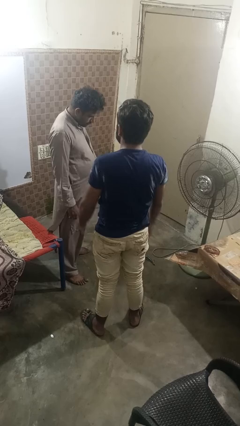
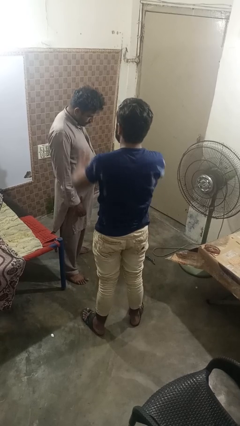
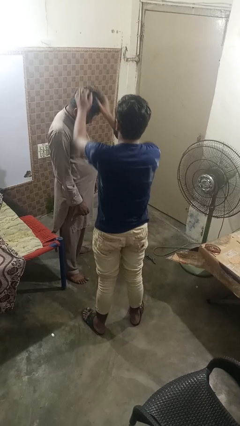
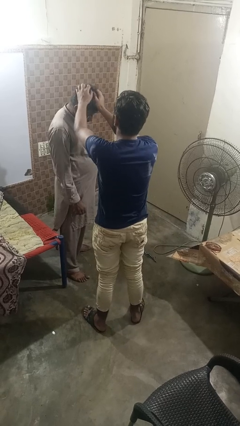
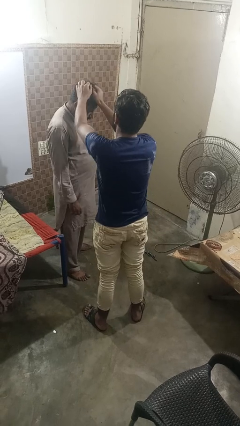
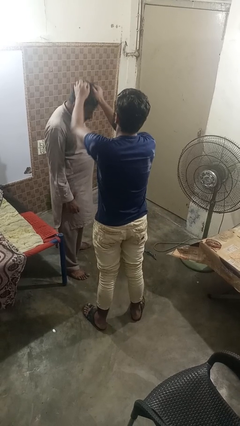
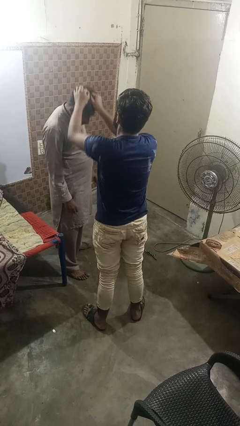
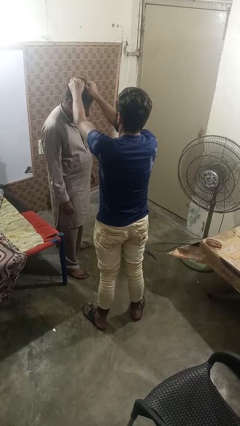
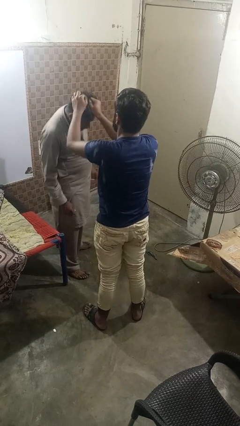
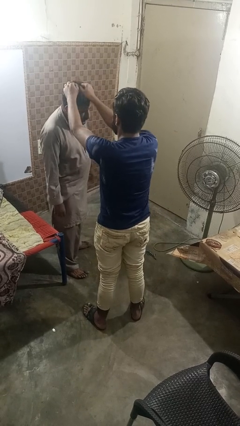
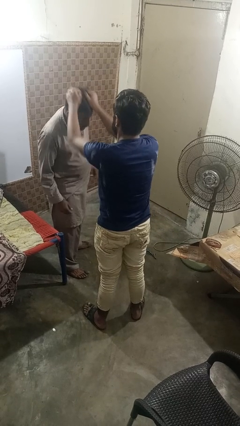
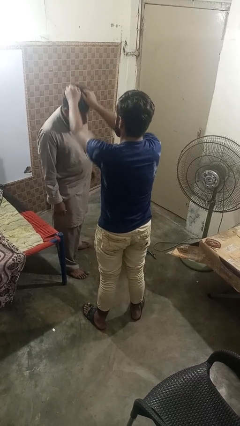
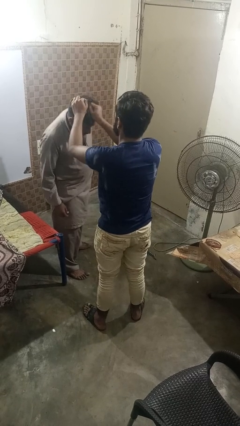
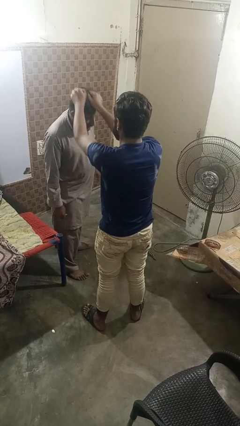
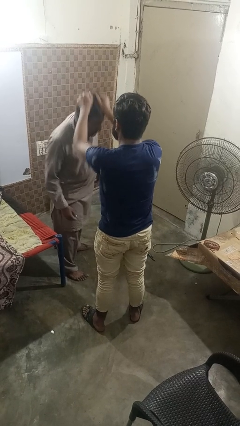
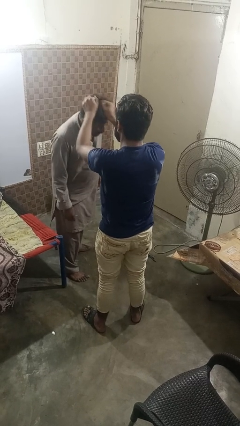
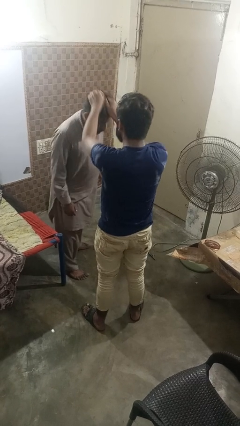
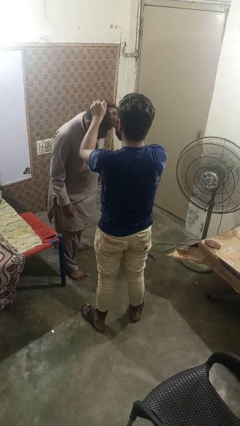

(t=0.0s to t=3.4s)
person grabs person by hair

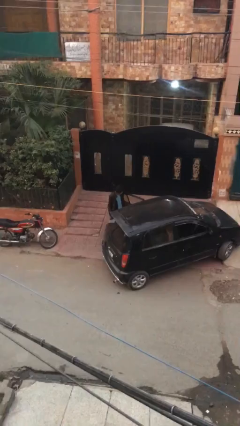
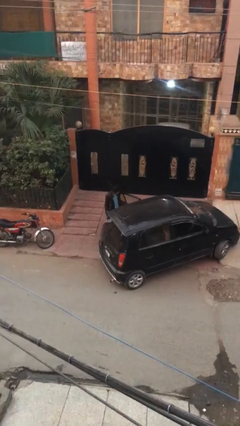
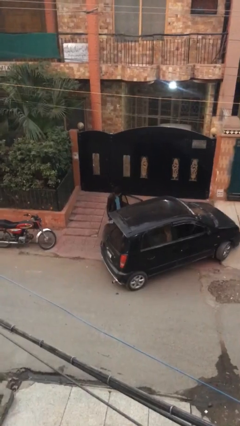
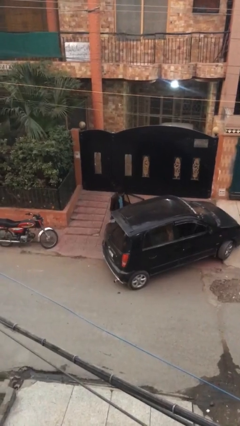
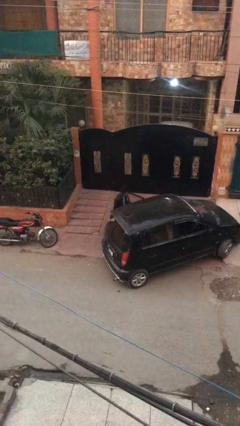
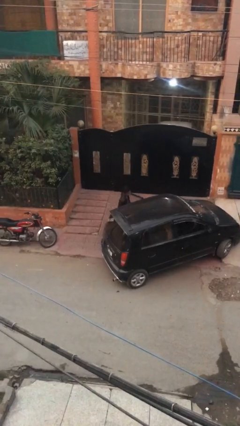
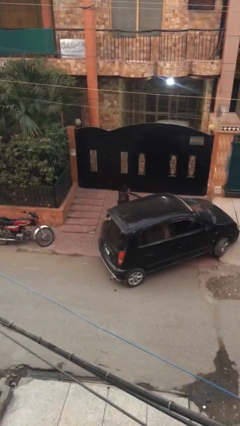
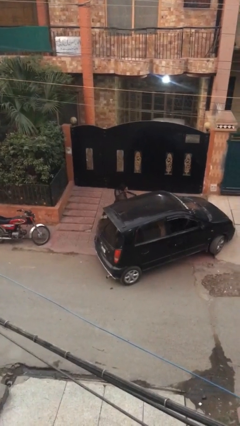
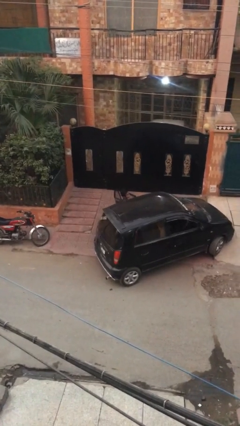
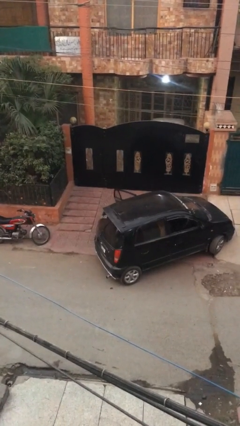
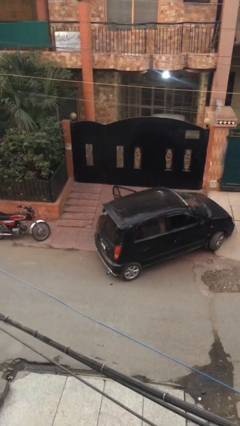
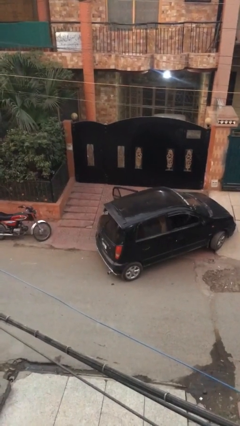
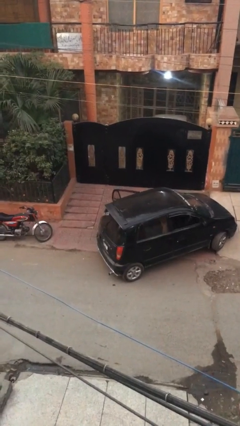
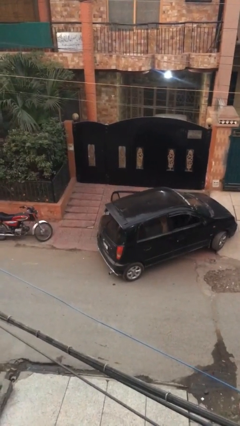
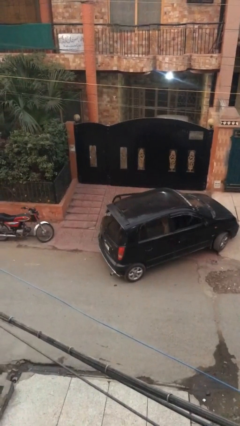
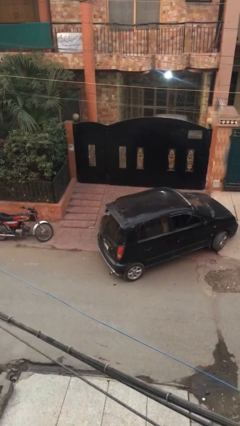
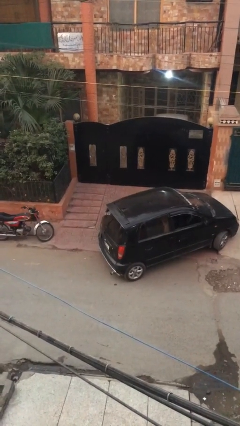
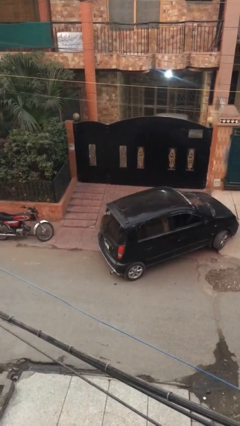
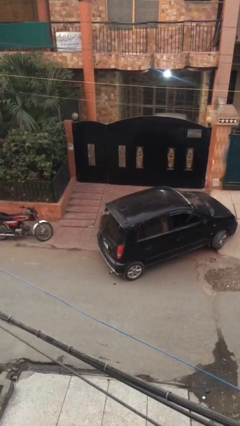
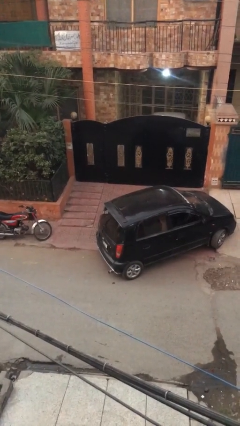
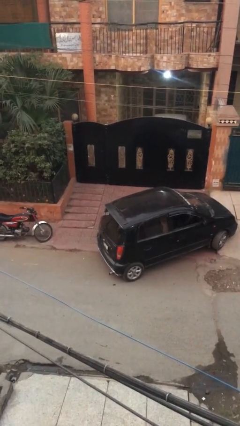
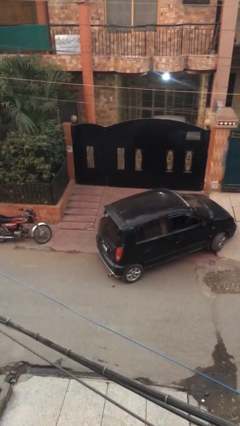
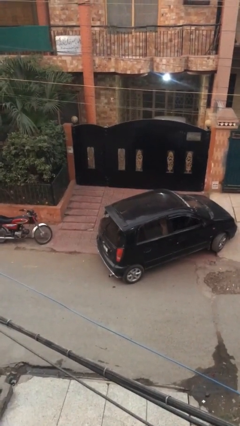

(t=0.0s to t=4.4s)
person enters car

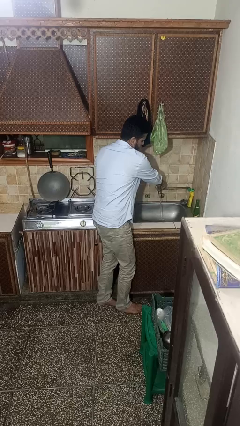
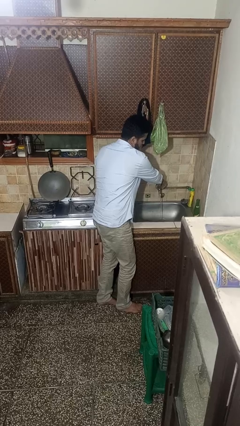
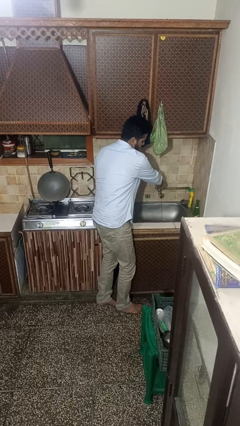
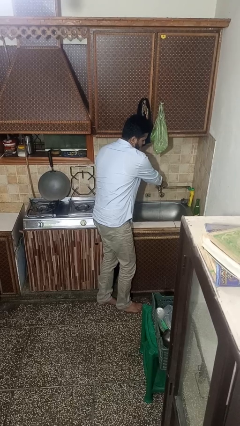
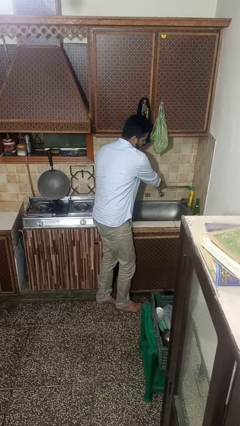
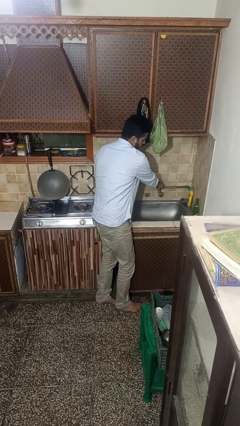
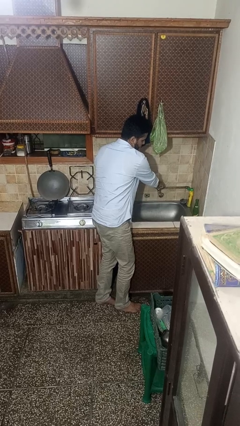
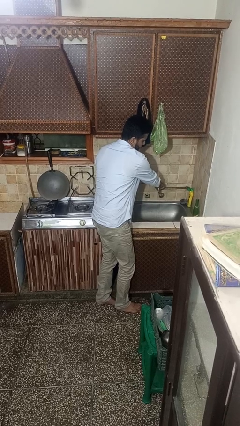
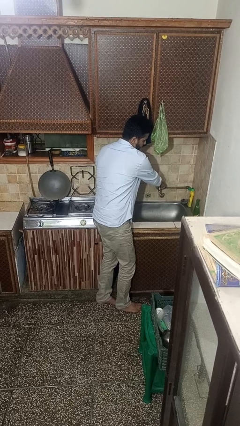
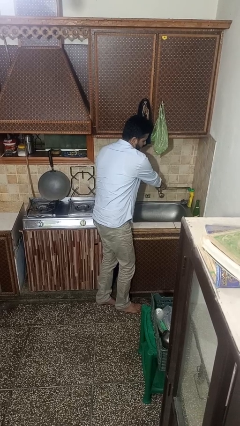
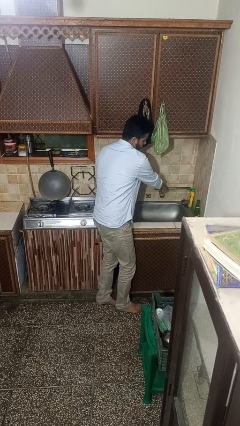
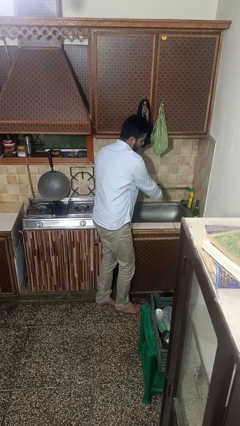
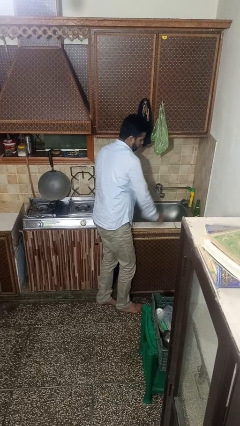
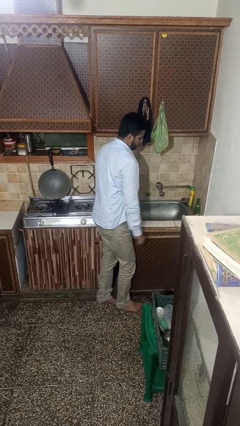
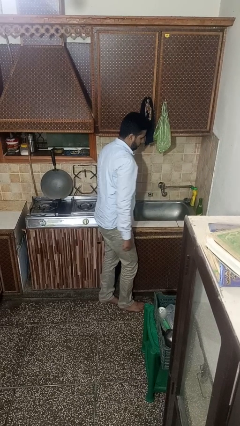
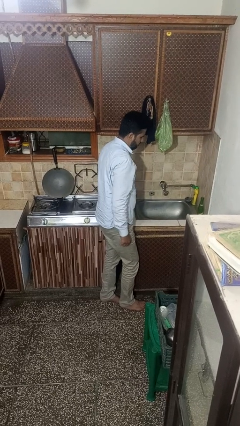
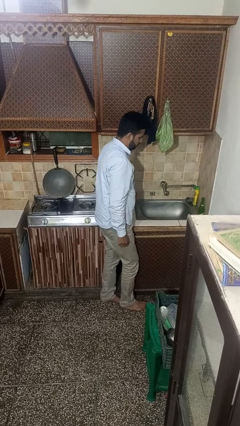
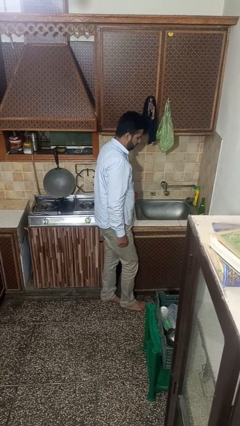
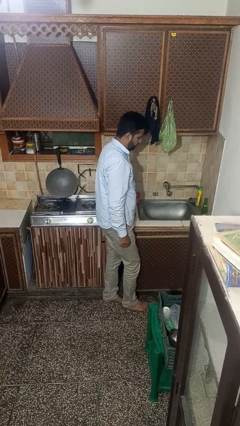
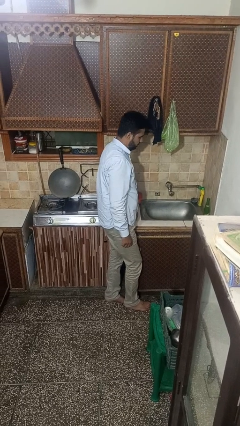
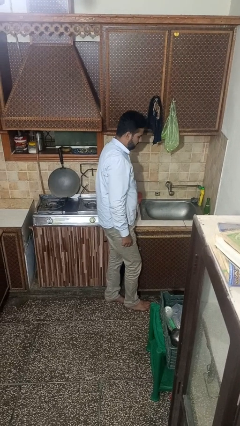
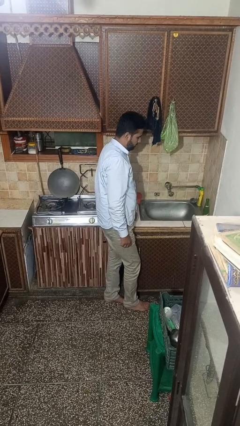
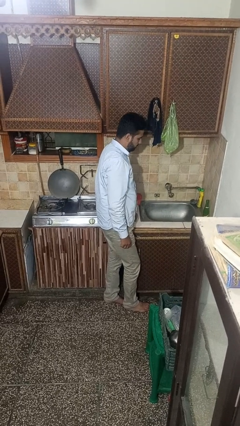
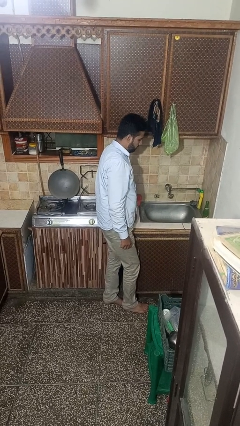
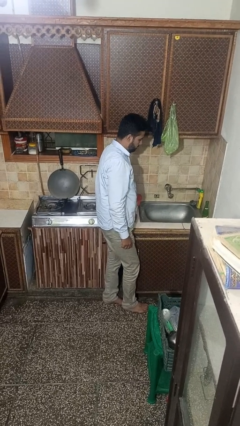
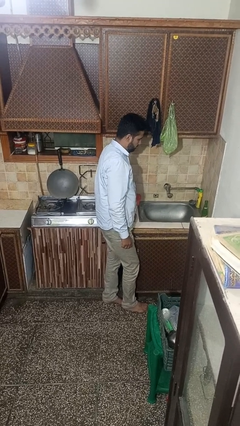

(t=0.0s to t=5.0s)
person turns off faucet

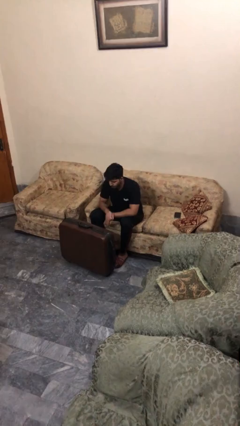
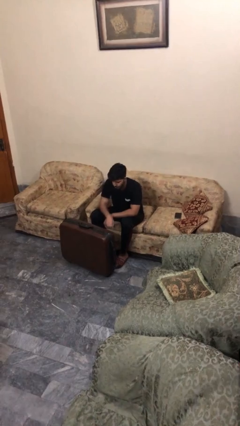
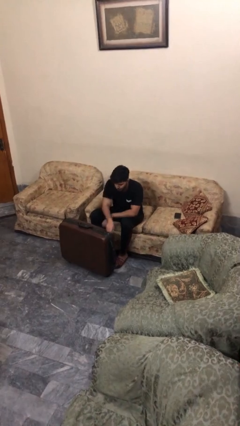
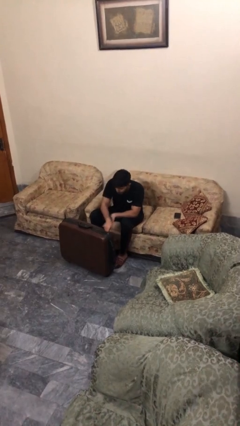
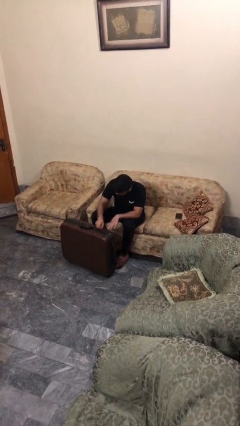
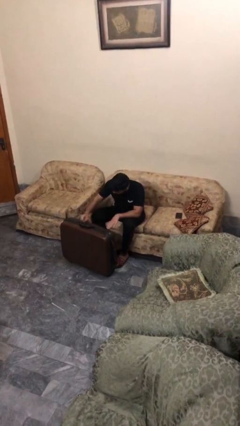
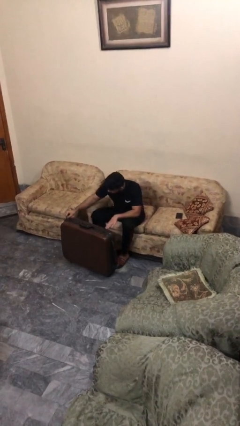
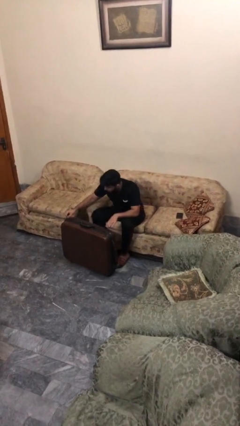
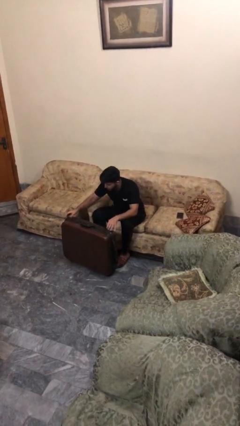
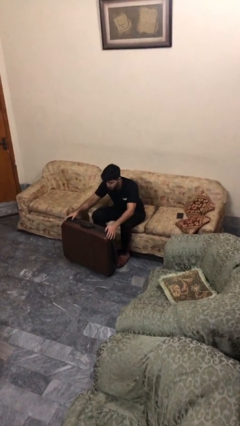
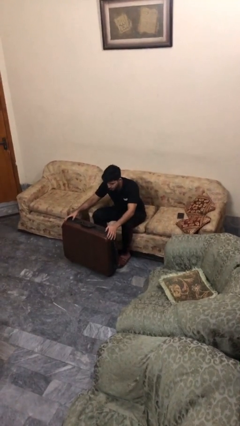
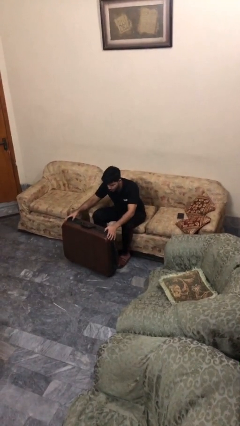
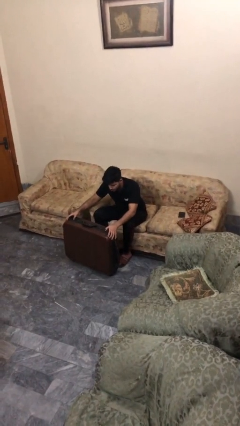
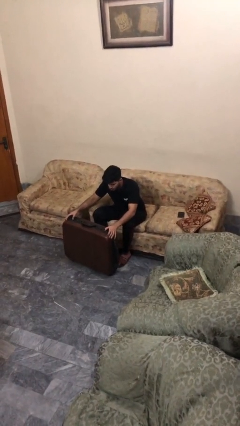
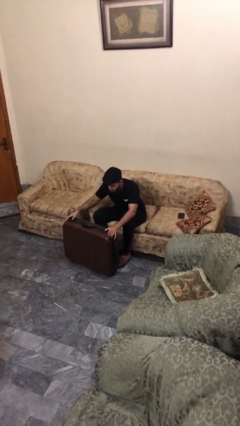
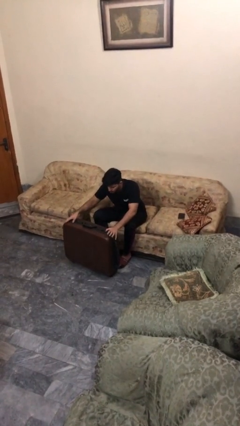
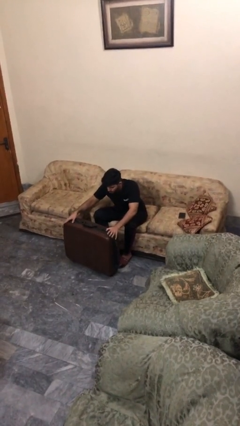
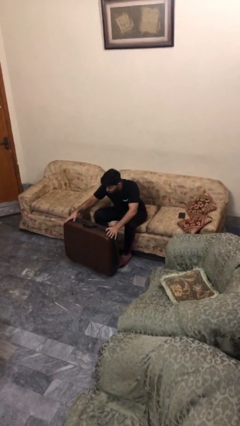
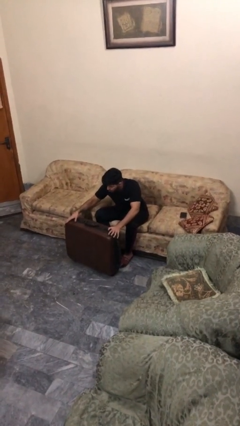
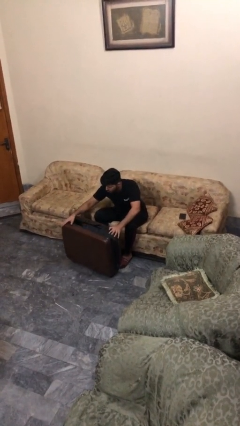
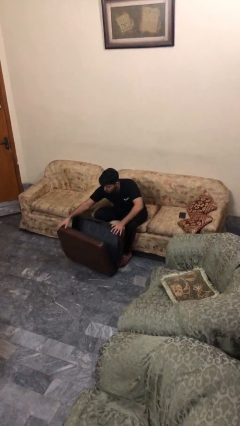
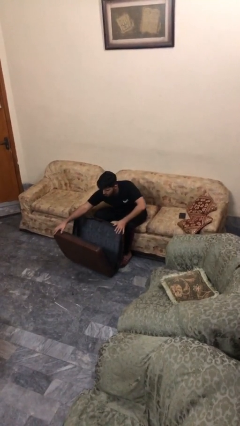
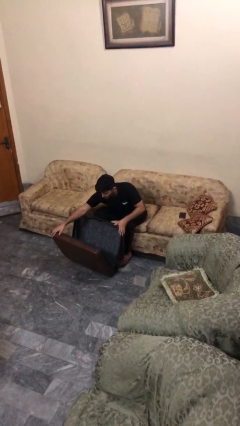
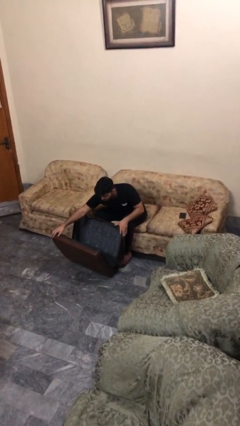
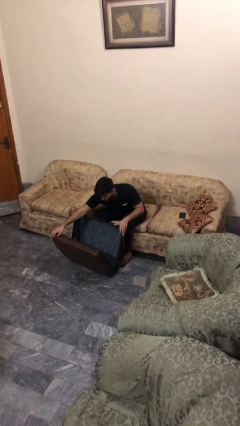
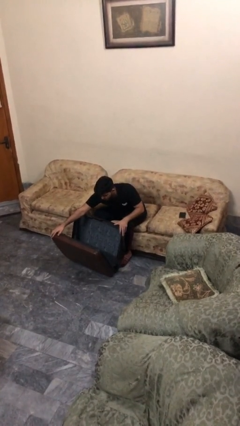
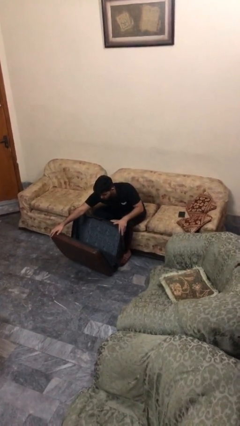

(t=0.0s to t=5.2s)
person opens suitcase
